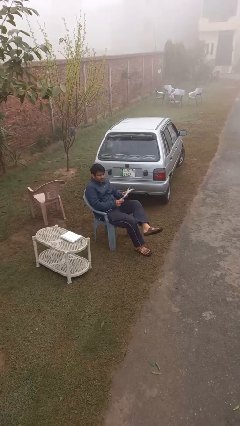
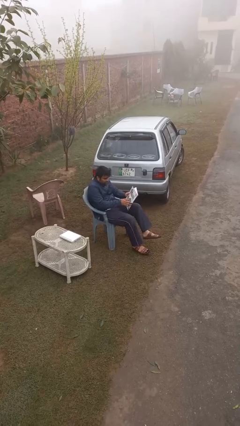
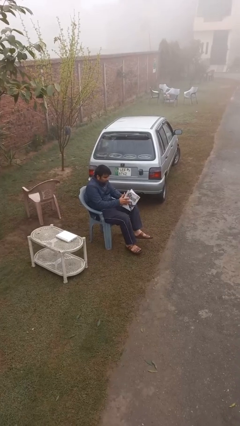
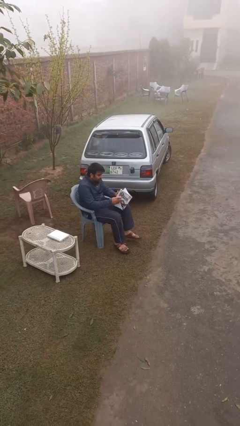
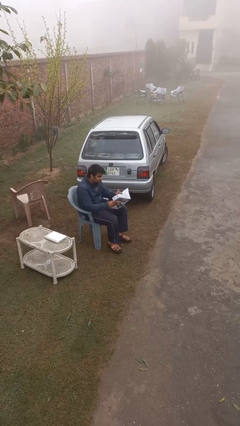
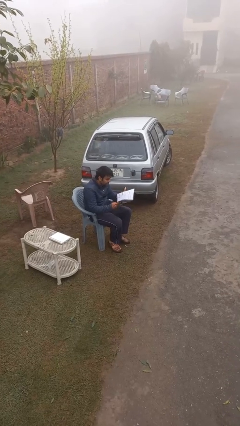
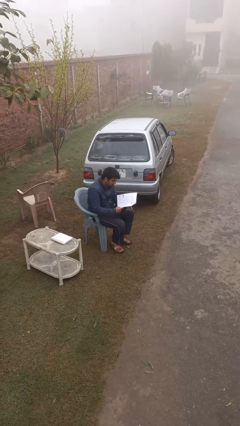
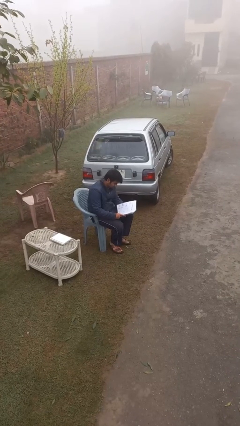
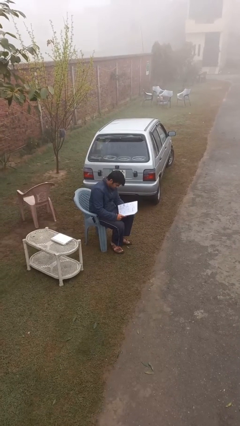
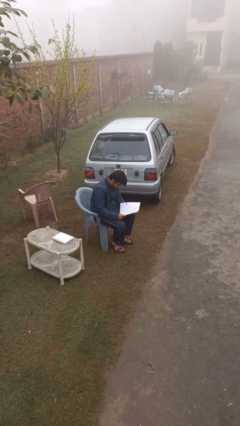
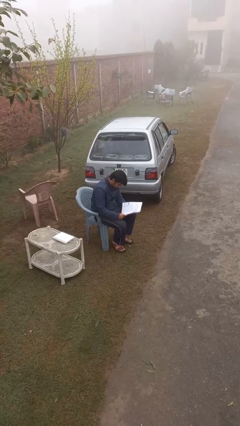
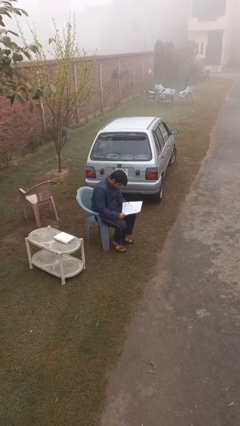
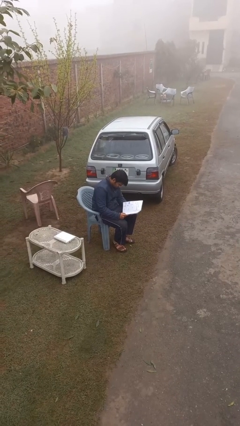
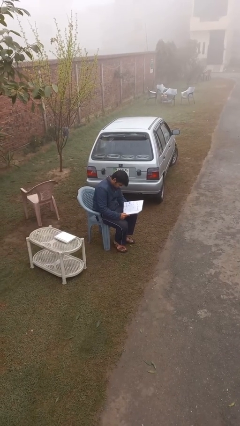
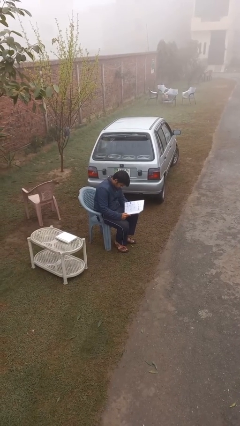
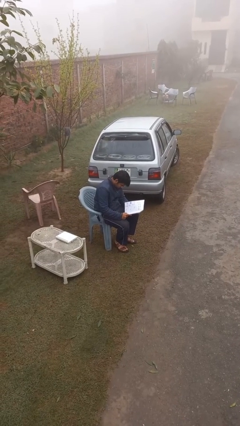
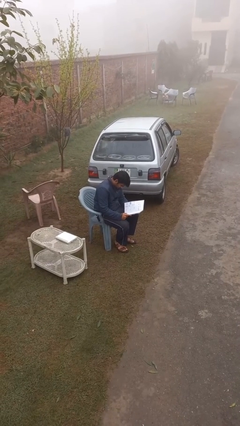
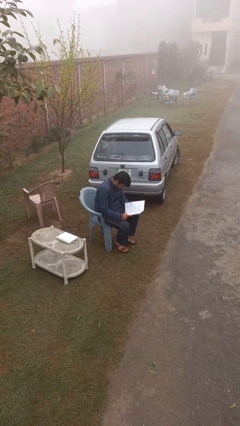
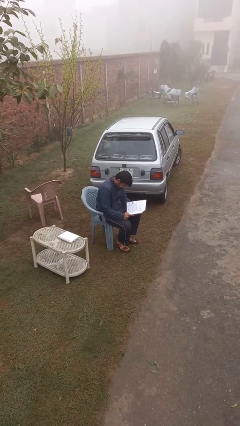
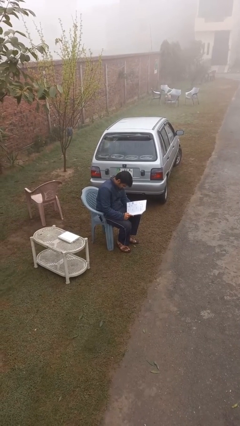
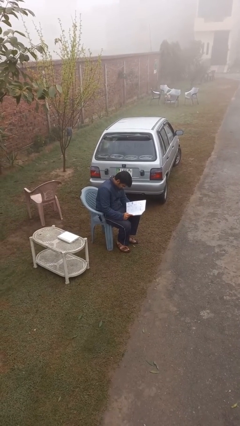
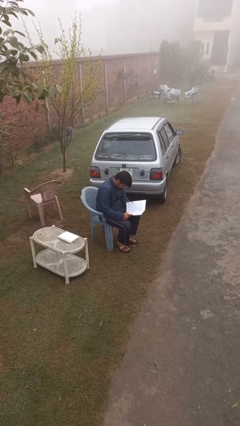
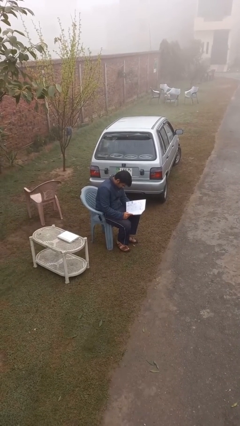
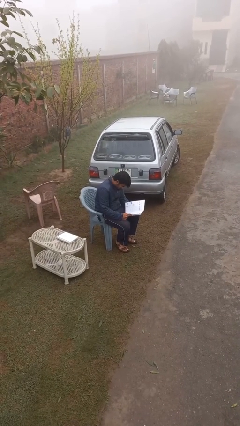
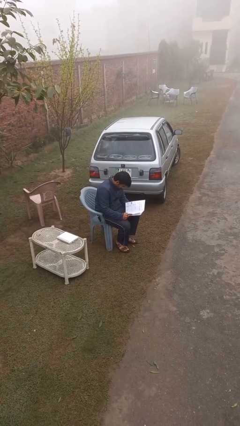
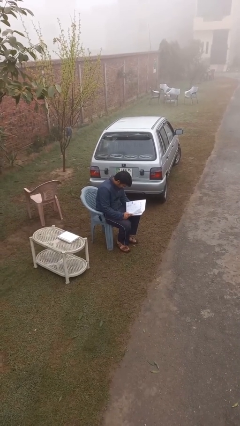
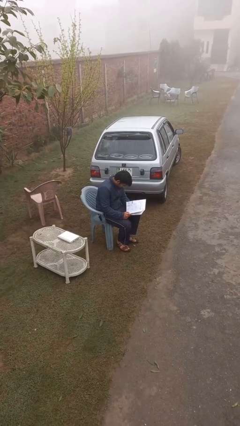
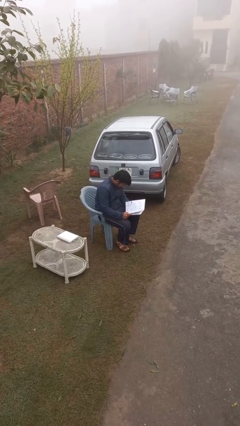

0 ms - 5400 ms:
person reads document

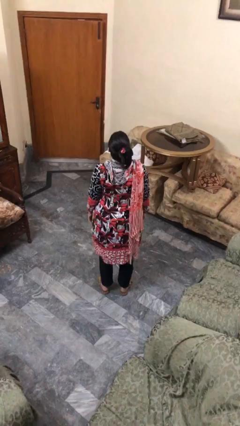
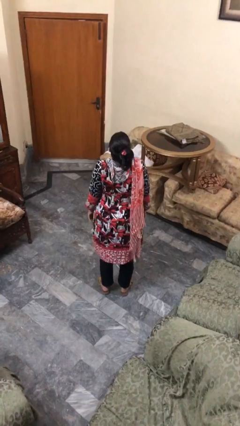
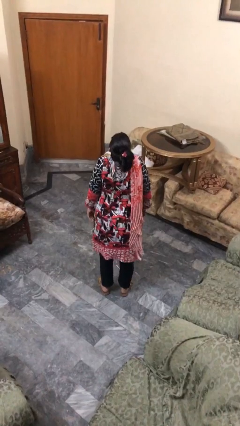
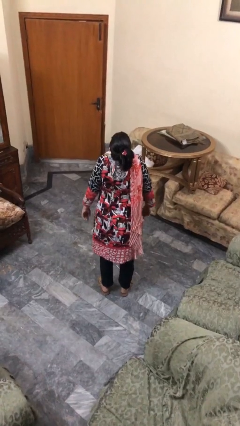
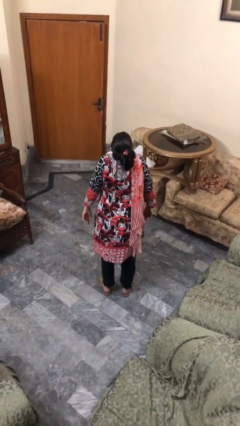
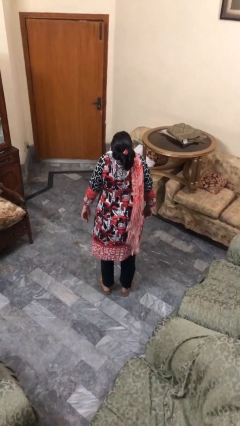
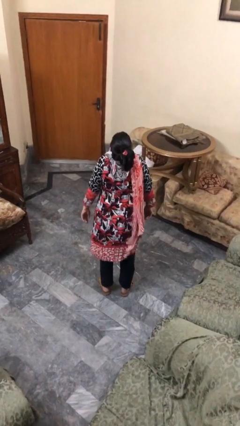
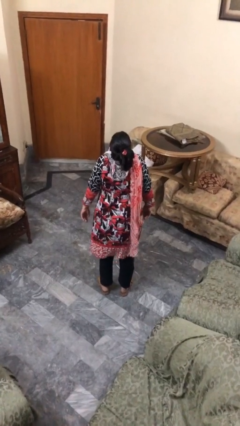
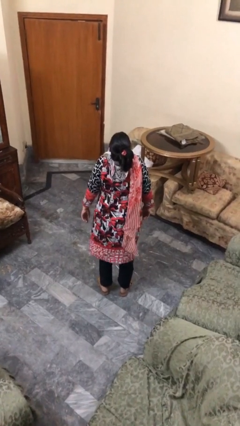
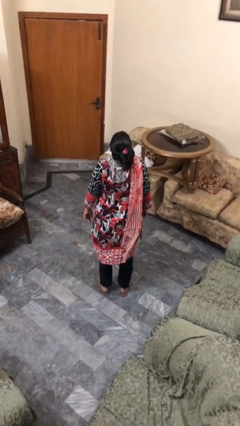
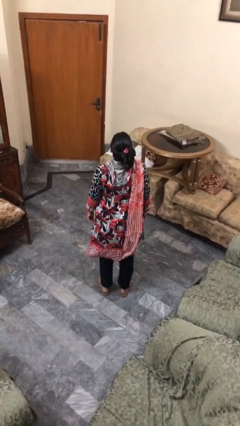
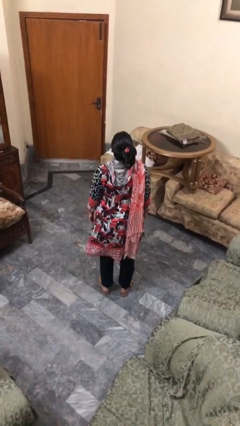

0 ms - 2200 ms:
person shrugs

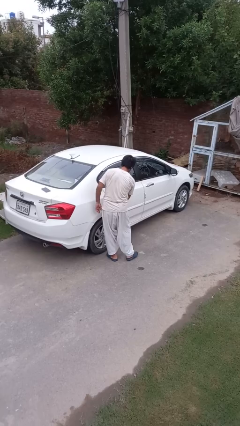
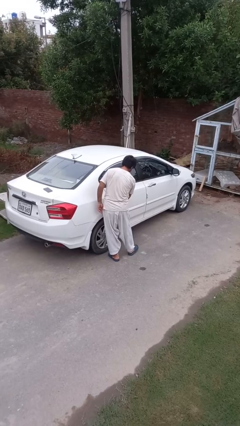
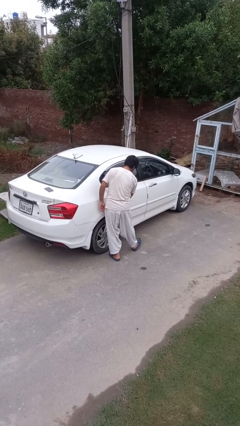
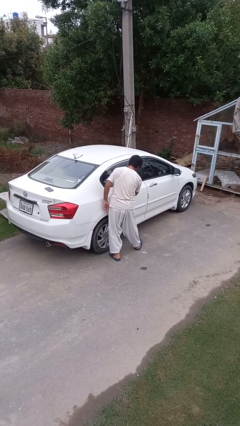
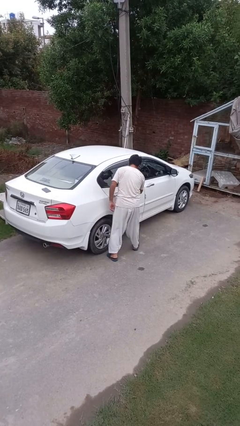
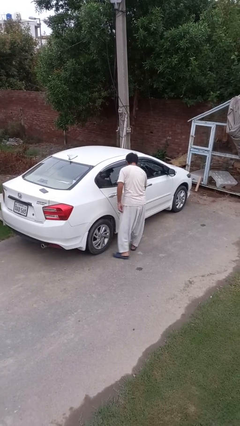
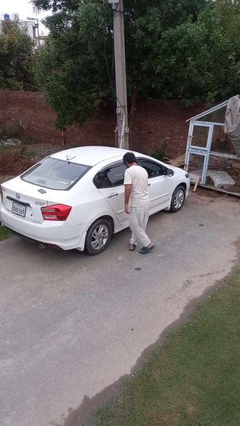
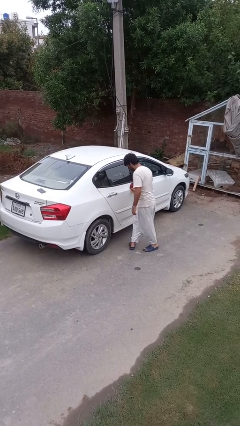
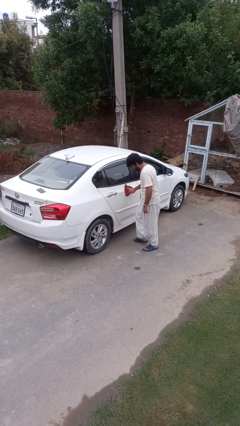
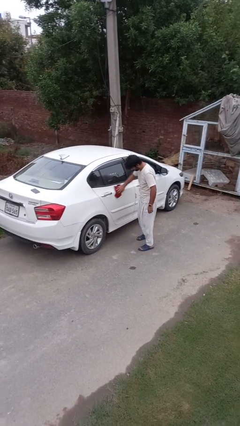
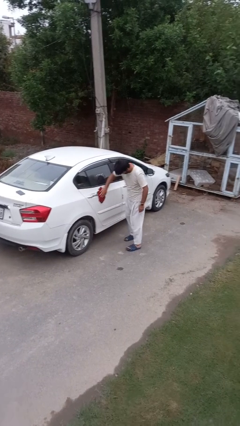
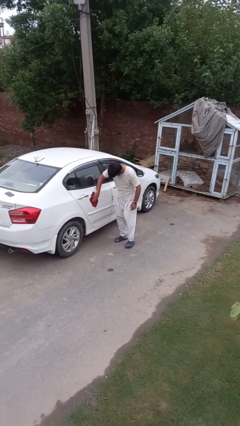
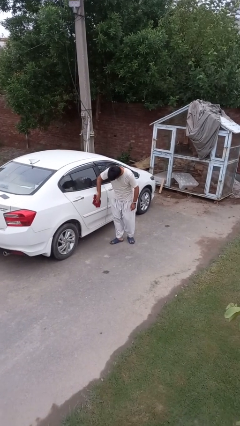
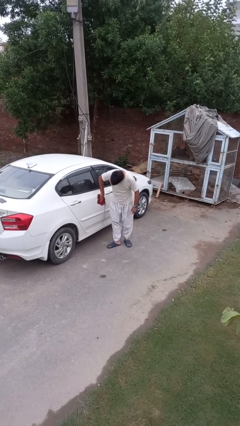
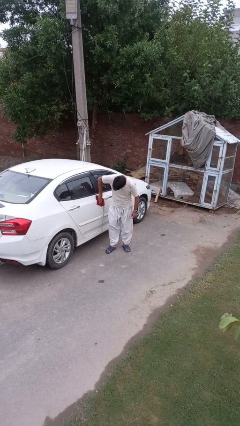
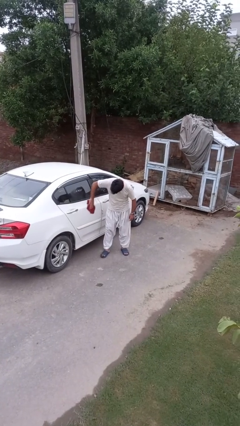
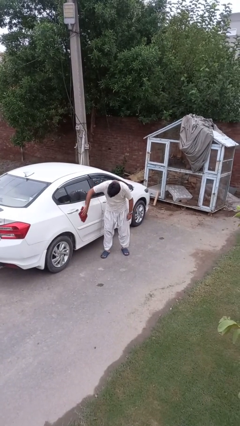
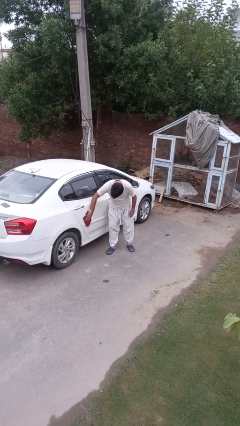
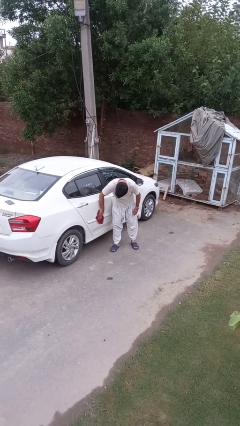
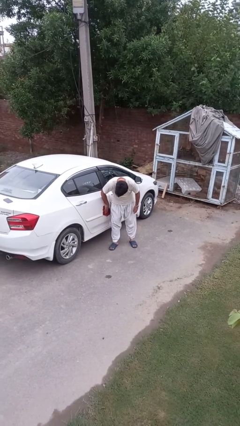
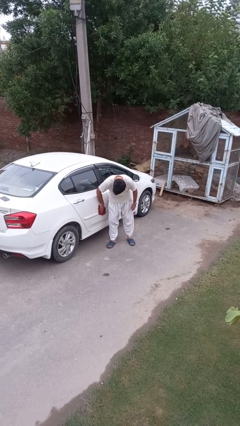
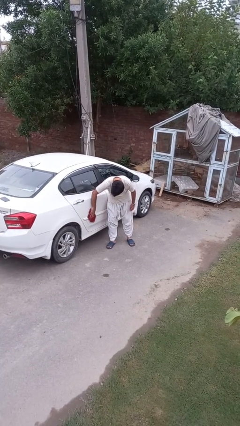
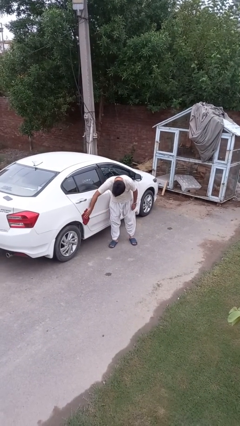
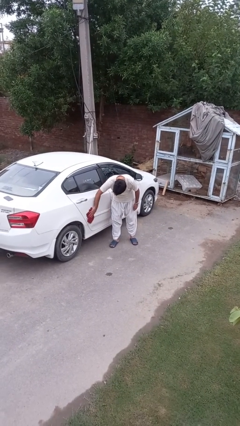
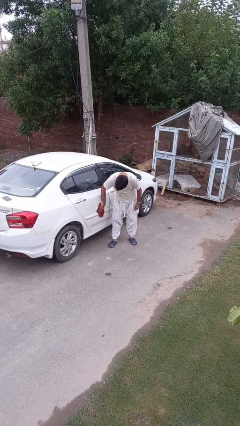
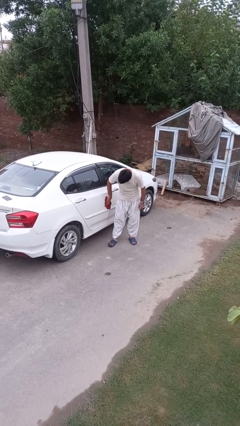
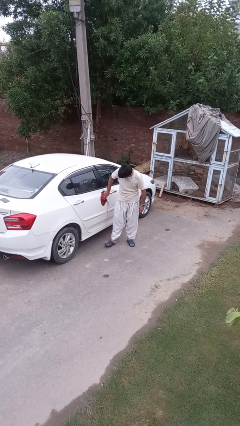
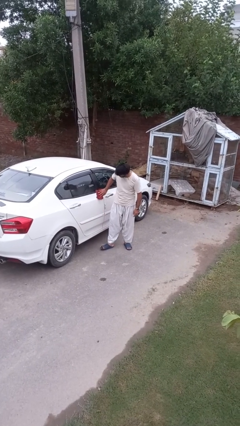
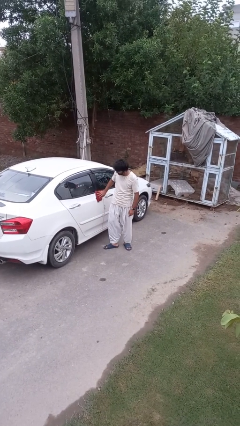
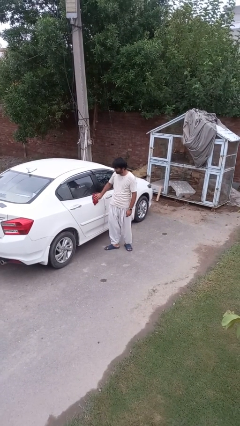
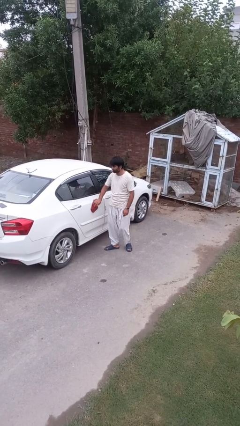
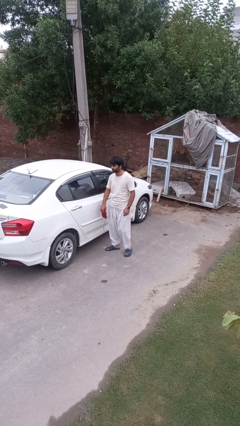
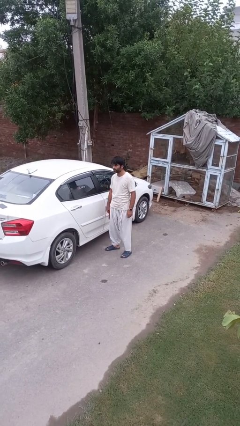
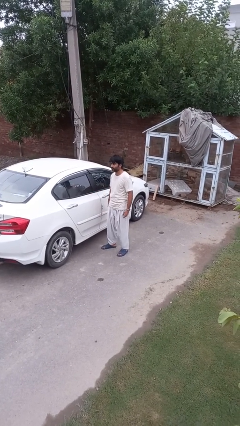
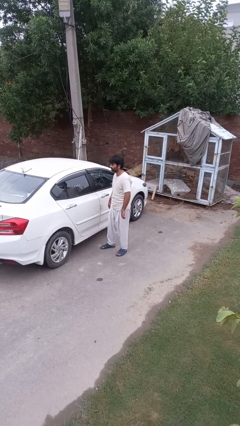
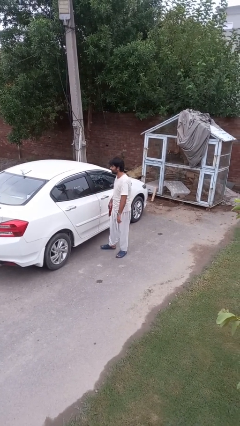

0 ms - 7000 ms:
person polishes car with rag

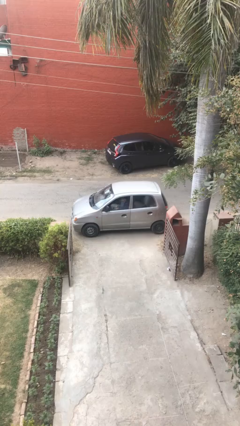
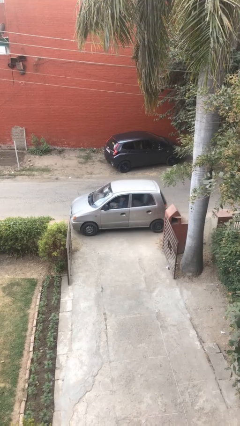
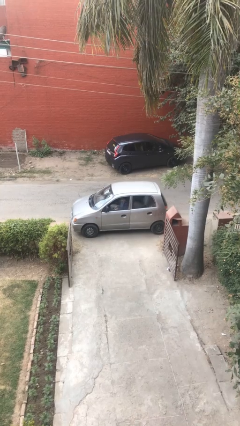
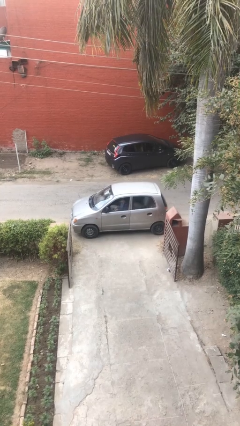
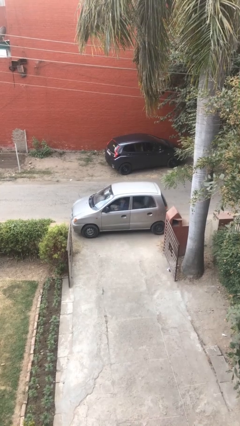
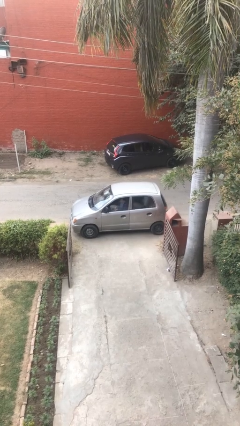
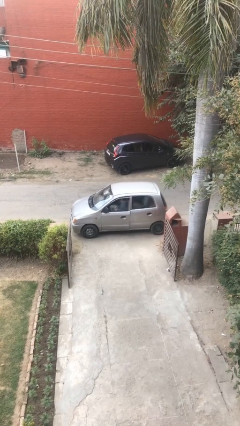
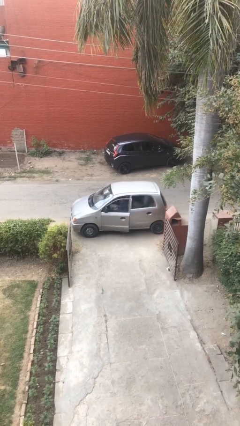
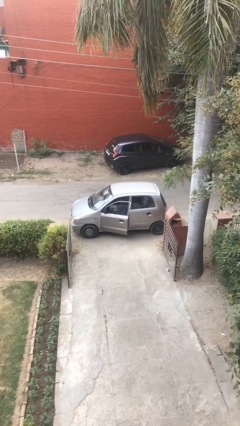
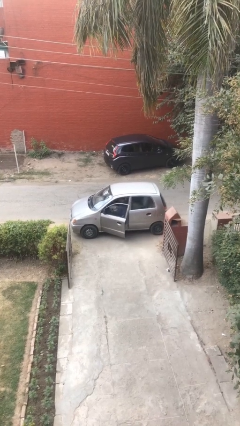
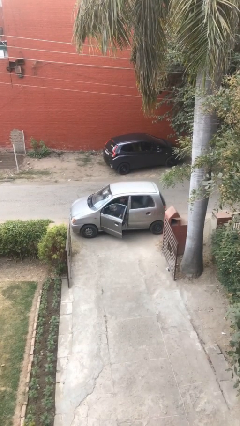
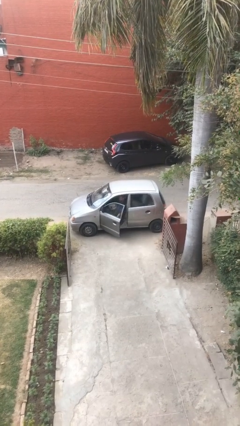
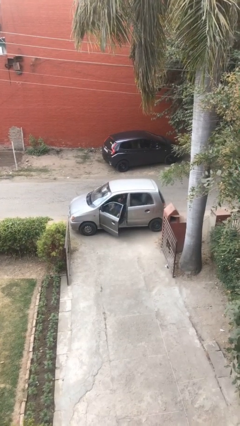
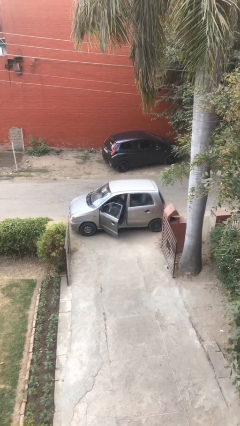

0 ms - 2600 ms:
person opens car door

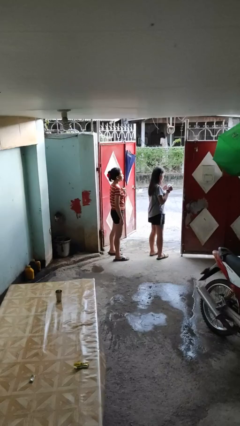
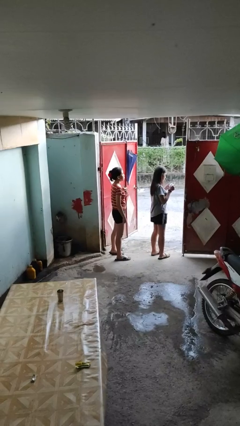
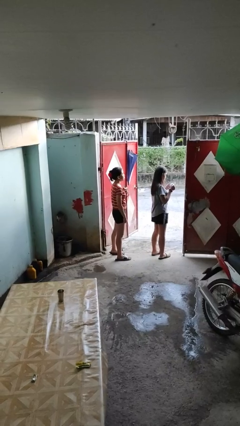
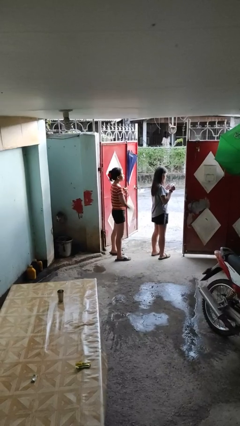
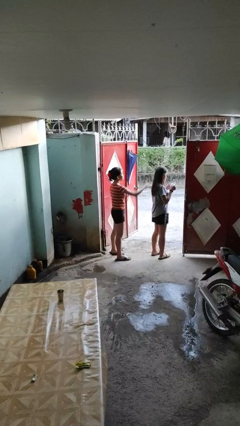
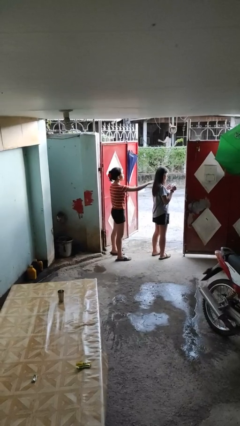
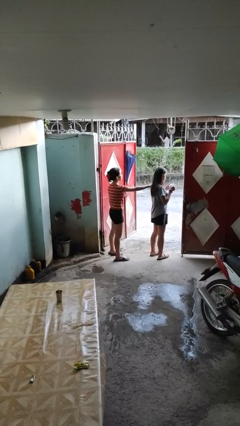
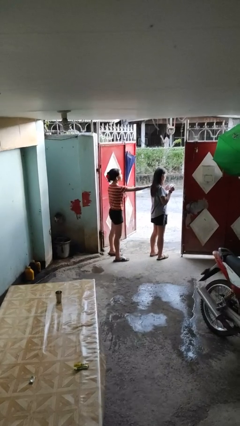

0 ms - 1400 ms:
person grabs person by shoulder
